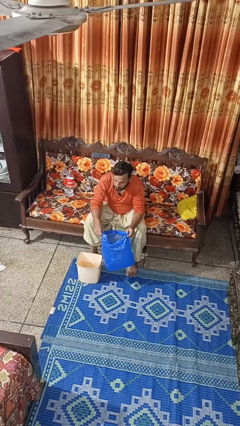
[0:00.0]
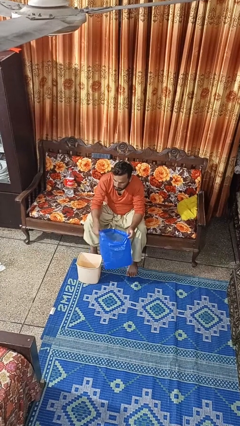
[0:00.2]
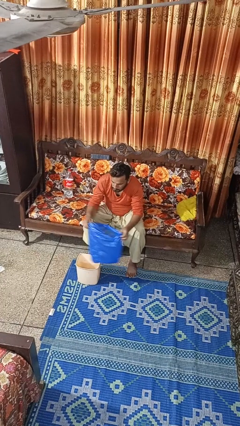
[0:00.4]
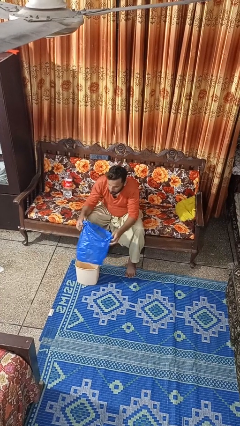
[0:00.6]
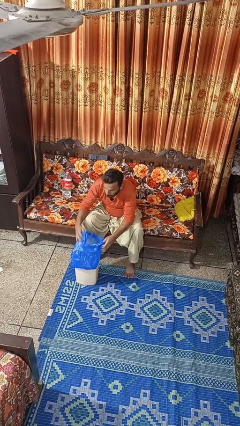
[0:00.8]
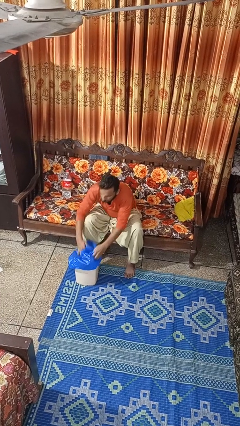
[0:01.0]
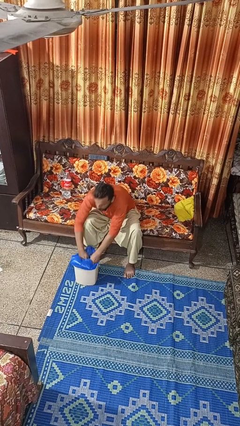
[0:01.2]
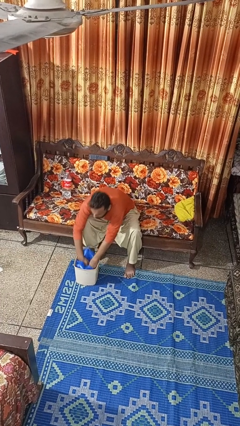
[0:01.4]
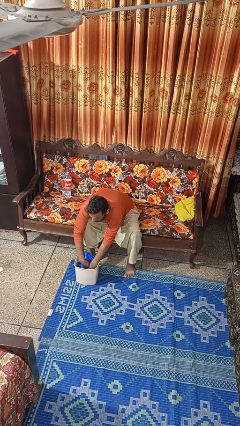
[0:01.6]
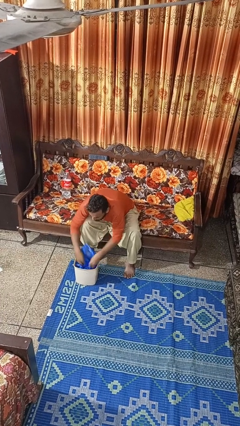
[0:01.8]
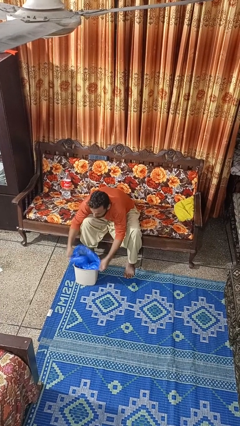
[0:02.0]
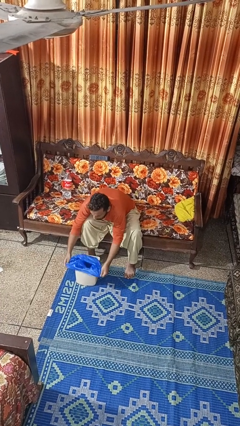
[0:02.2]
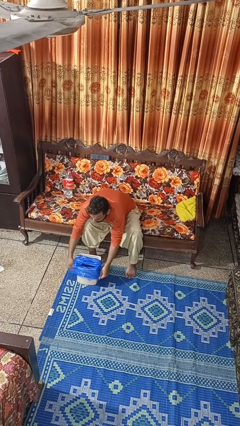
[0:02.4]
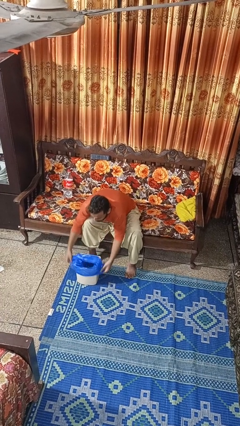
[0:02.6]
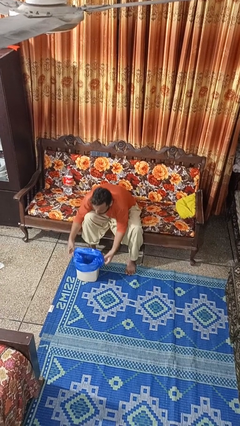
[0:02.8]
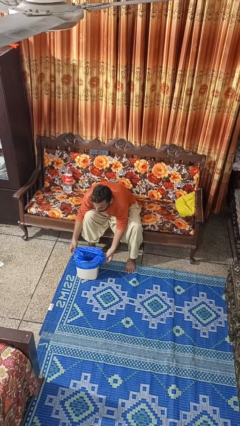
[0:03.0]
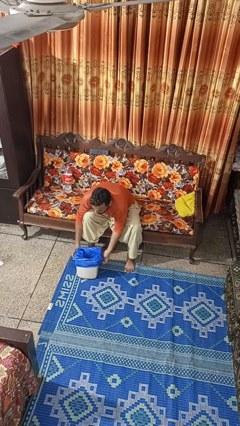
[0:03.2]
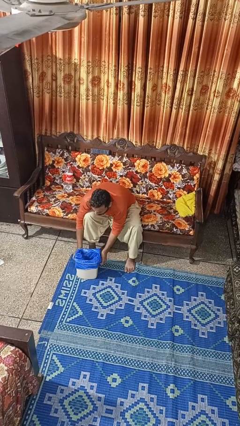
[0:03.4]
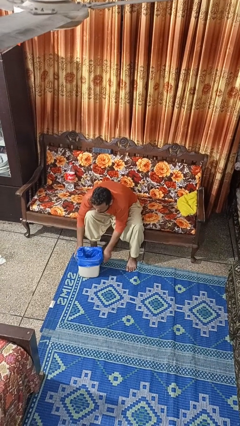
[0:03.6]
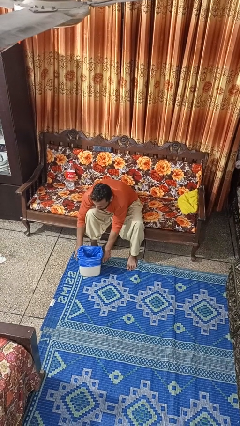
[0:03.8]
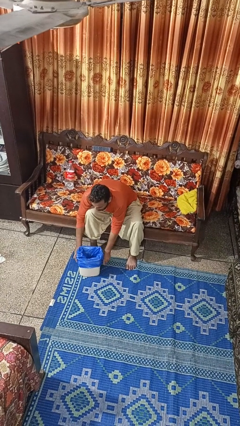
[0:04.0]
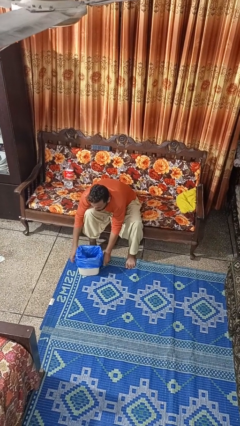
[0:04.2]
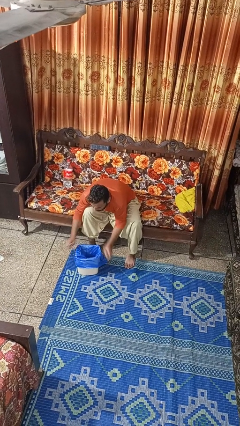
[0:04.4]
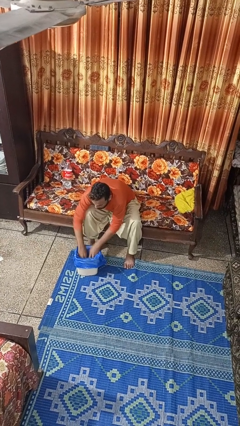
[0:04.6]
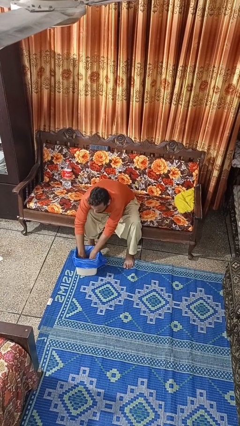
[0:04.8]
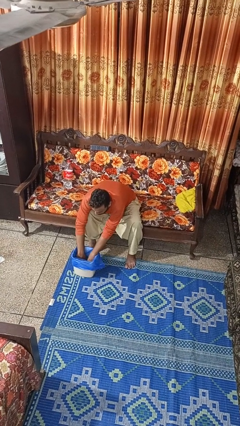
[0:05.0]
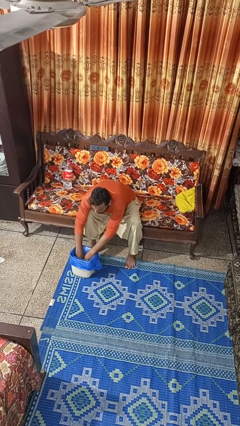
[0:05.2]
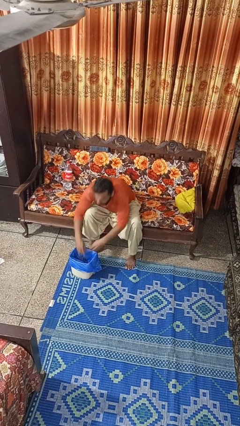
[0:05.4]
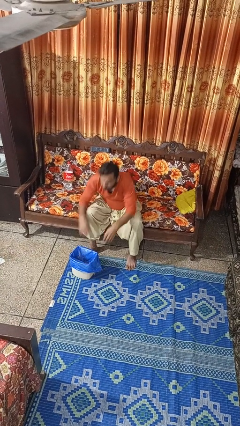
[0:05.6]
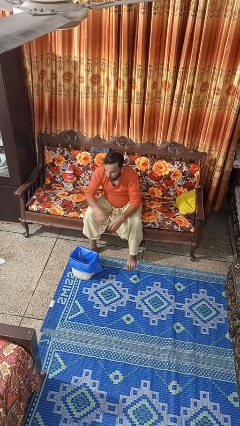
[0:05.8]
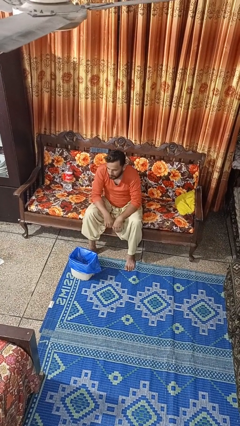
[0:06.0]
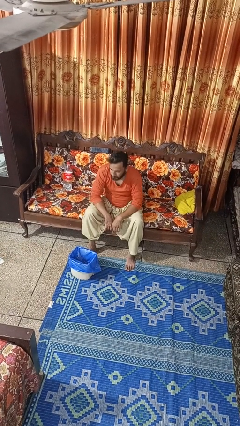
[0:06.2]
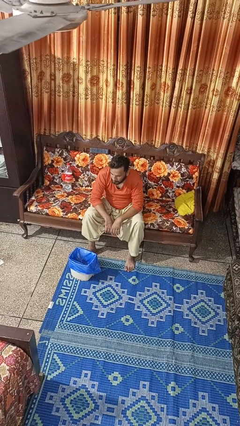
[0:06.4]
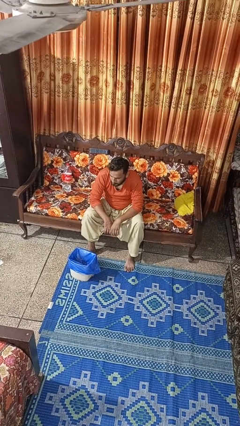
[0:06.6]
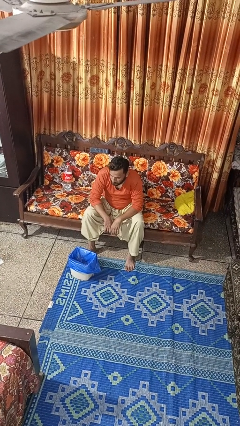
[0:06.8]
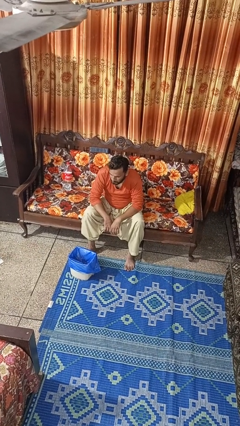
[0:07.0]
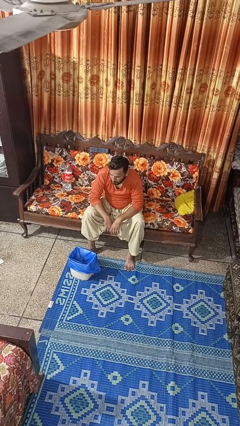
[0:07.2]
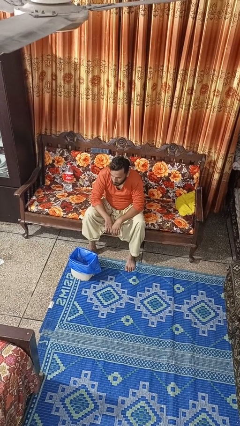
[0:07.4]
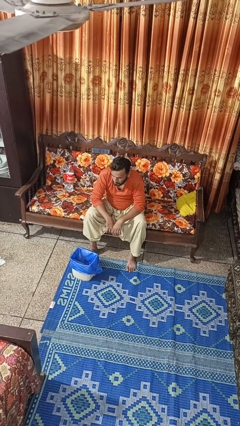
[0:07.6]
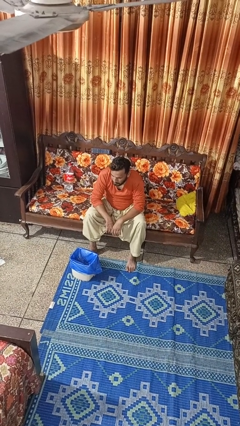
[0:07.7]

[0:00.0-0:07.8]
person inserts trashbag into trashcan

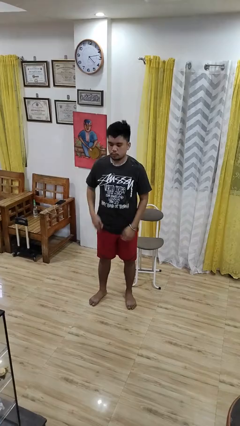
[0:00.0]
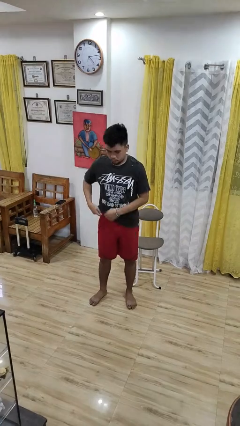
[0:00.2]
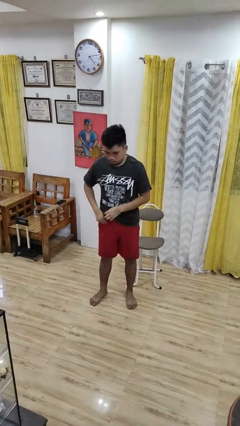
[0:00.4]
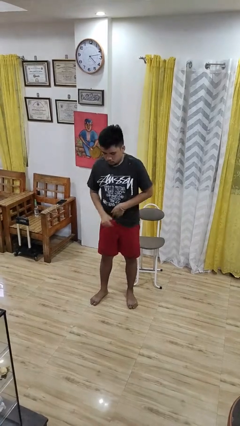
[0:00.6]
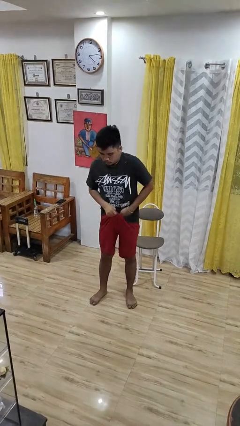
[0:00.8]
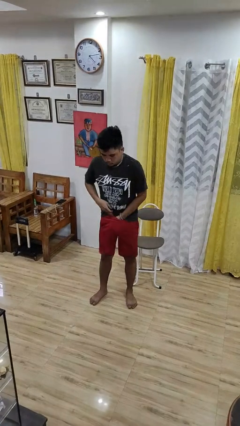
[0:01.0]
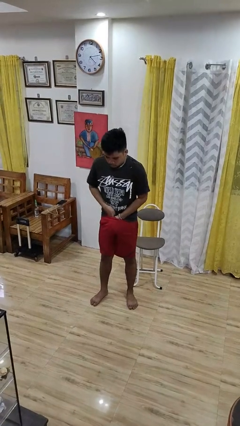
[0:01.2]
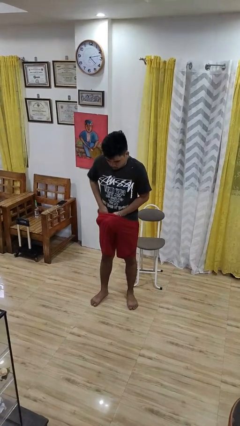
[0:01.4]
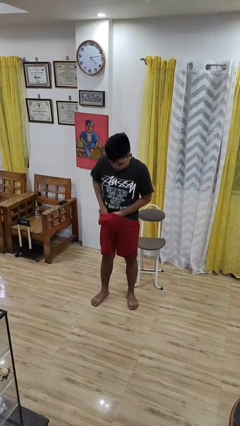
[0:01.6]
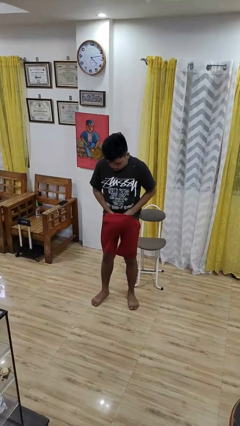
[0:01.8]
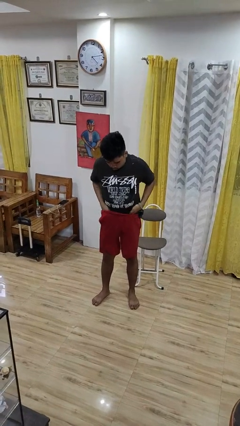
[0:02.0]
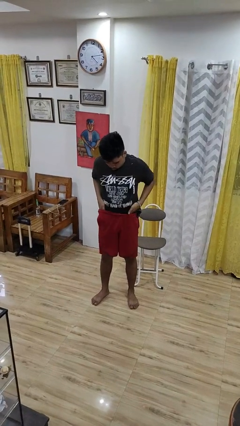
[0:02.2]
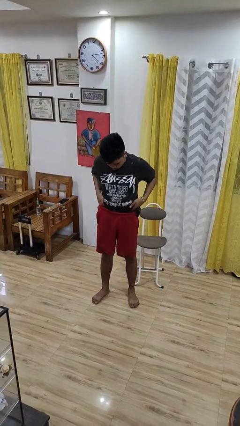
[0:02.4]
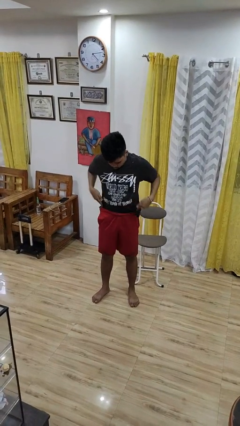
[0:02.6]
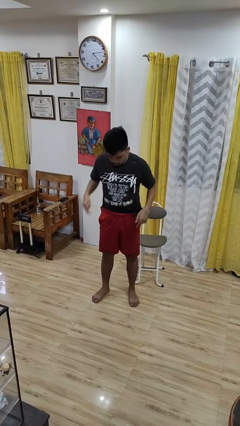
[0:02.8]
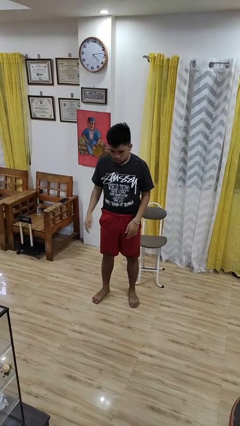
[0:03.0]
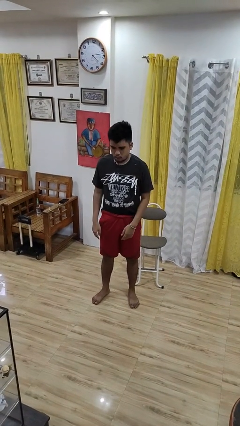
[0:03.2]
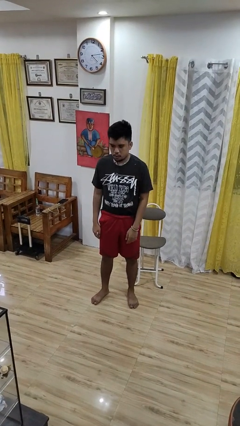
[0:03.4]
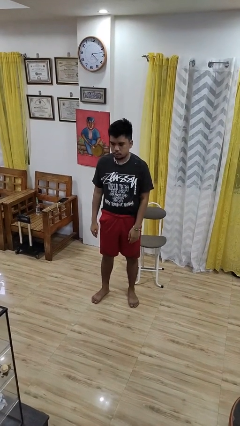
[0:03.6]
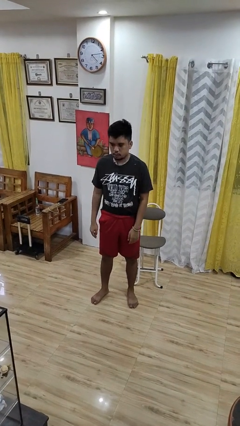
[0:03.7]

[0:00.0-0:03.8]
person tucks in shirt

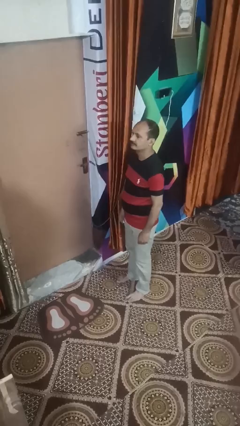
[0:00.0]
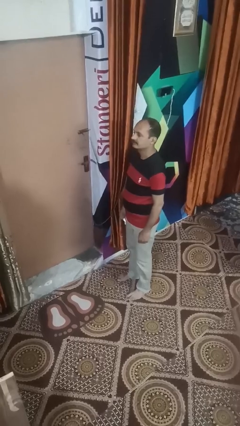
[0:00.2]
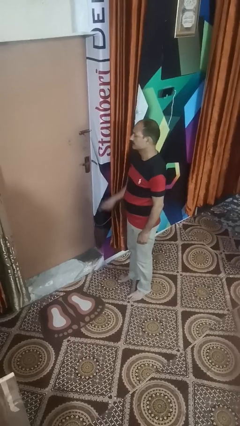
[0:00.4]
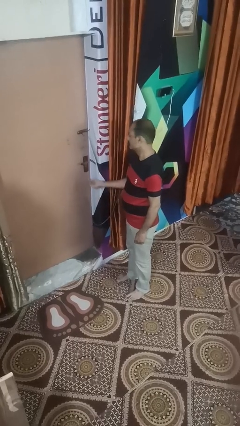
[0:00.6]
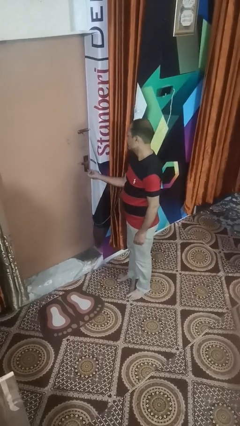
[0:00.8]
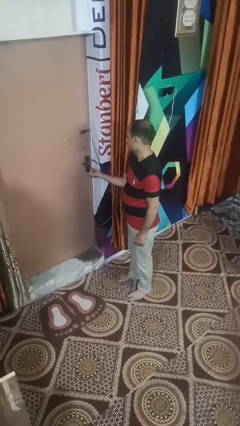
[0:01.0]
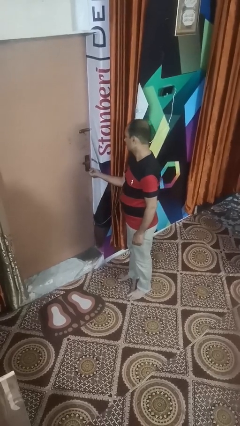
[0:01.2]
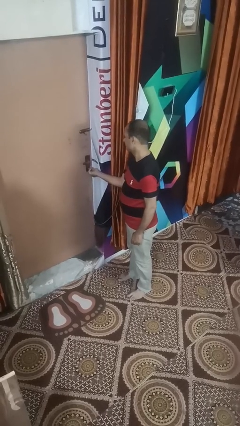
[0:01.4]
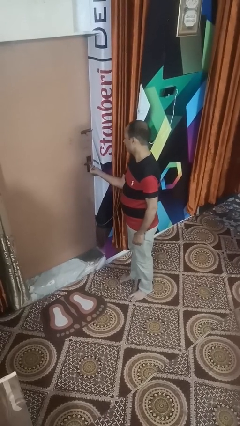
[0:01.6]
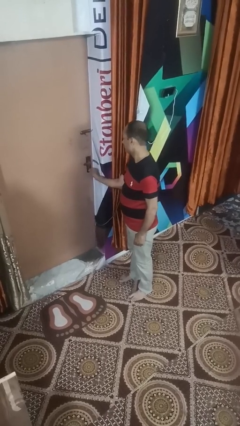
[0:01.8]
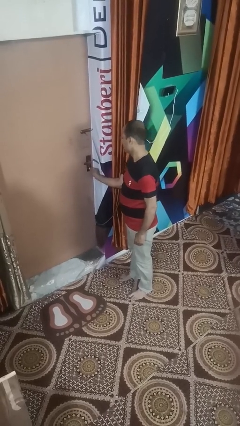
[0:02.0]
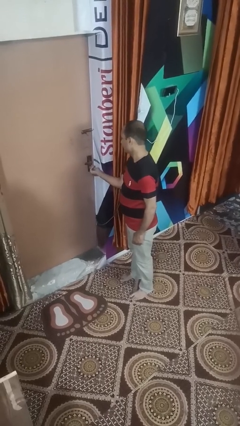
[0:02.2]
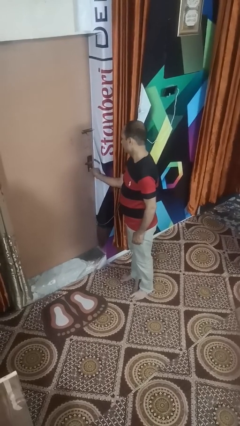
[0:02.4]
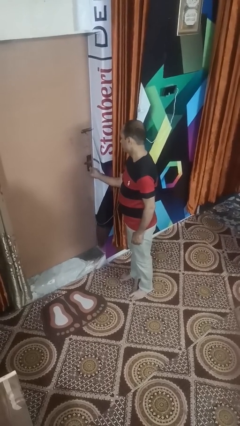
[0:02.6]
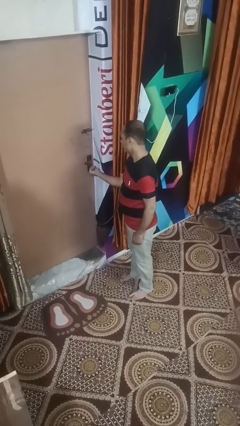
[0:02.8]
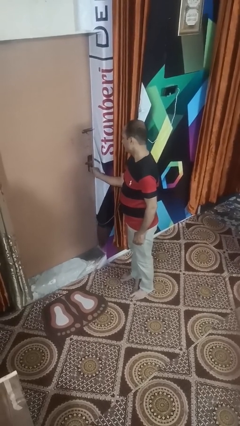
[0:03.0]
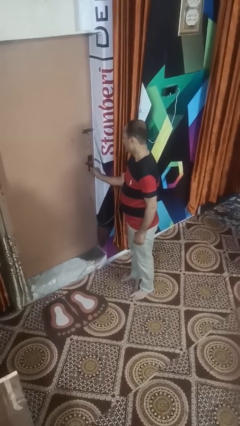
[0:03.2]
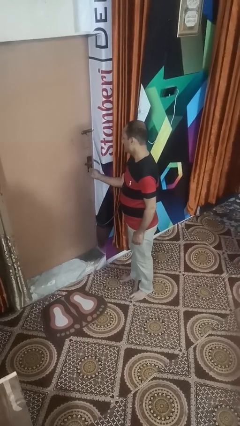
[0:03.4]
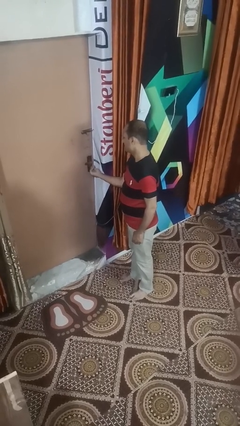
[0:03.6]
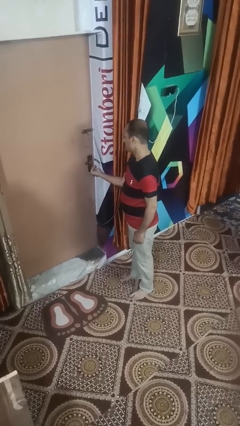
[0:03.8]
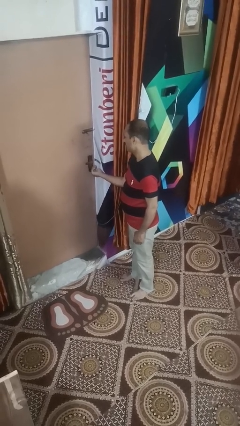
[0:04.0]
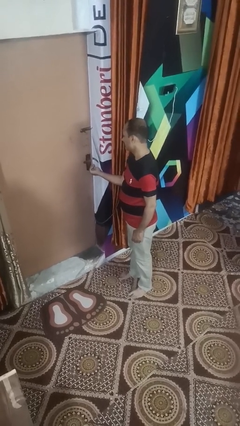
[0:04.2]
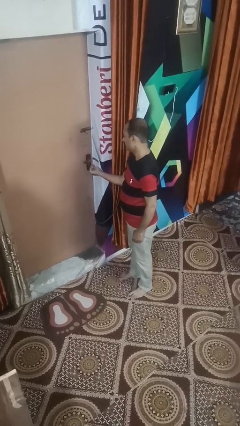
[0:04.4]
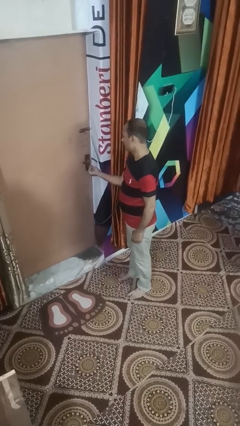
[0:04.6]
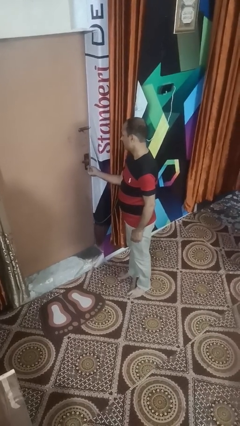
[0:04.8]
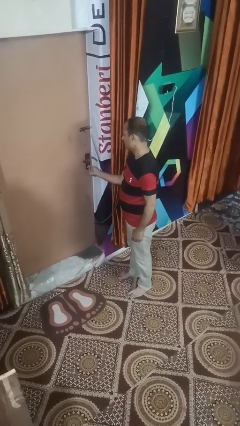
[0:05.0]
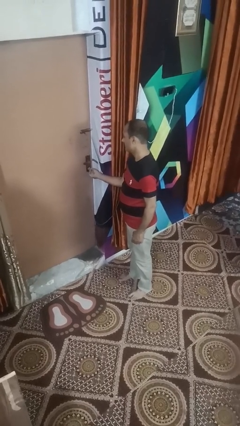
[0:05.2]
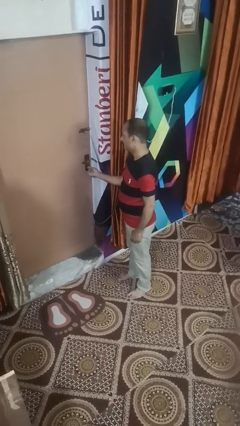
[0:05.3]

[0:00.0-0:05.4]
person unlocks door with keys

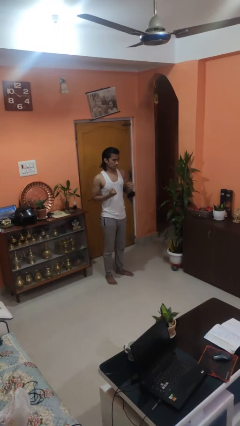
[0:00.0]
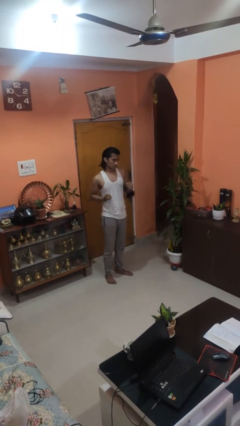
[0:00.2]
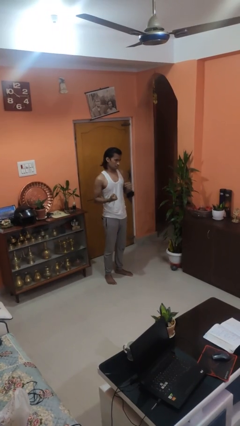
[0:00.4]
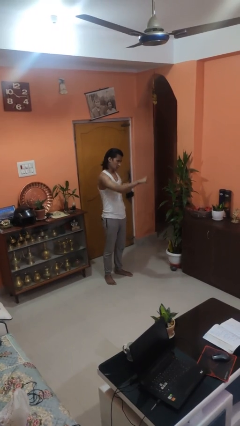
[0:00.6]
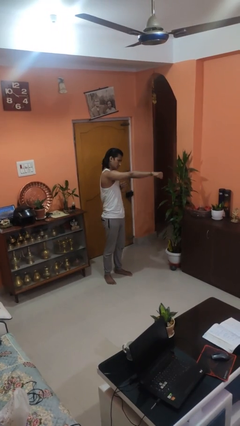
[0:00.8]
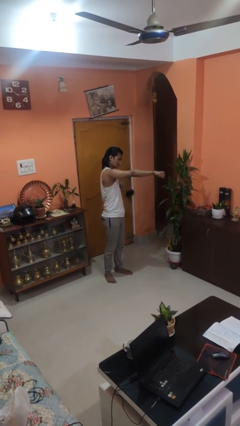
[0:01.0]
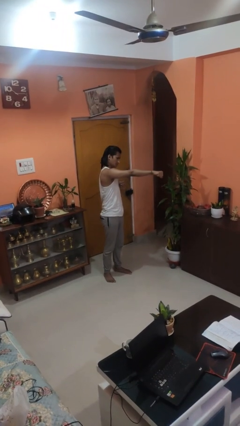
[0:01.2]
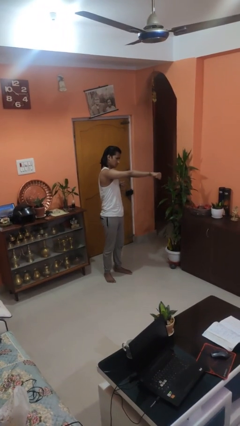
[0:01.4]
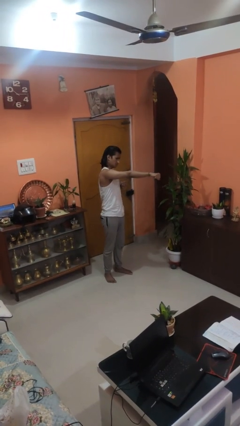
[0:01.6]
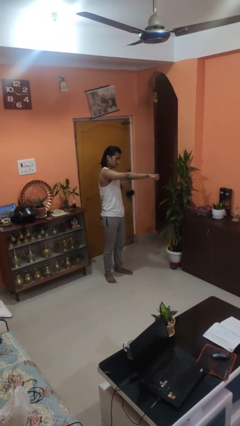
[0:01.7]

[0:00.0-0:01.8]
person punches
